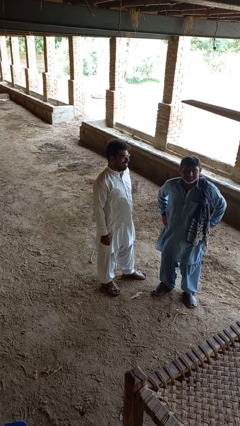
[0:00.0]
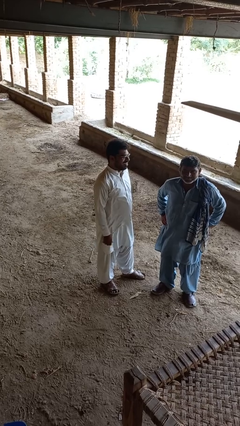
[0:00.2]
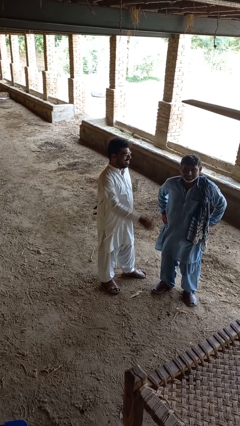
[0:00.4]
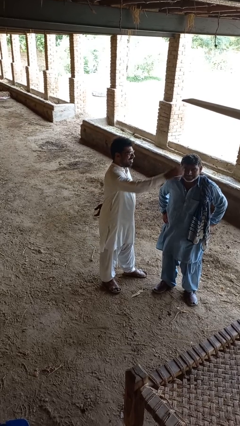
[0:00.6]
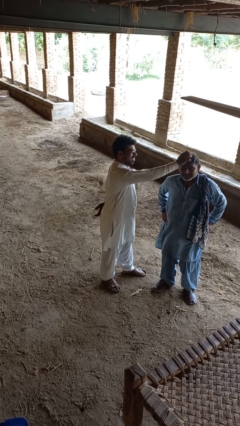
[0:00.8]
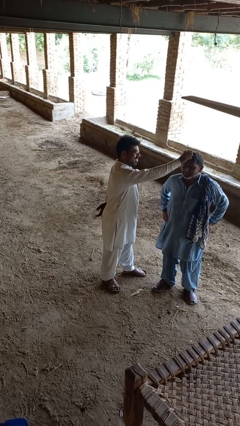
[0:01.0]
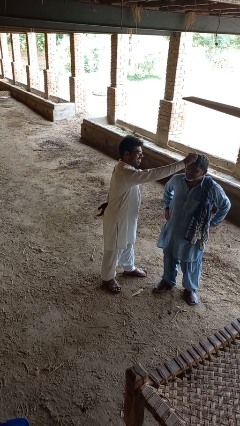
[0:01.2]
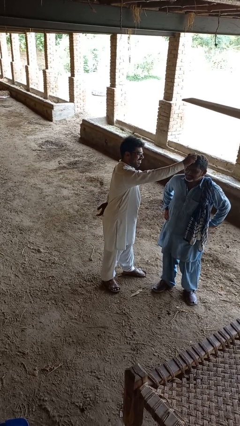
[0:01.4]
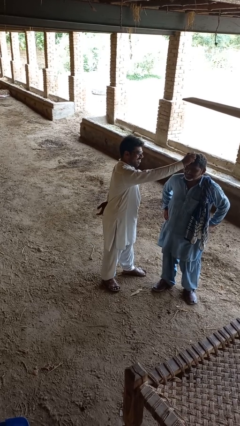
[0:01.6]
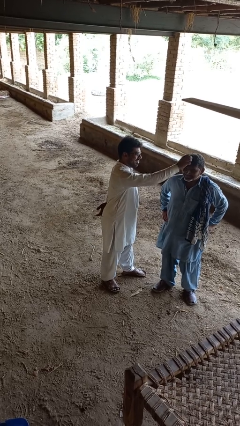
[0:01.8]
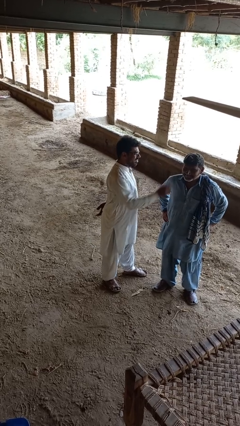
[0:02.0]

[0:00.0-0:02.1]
person grabs person by hair

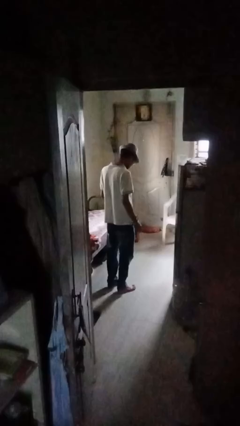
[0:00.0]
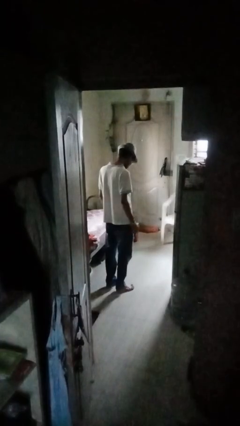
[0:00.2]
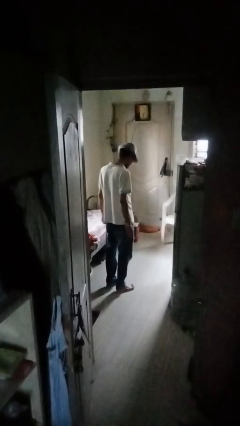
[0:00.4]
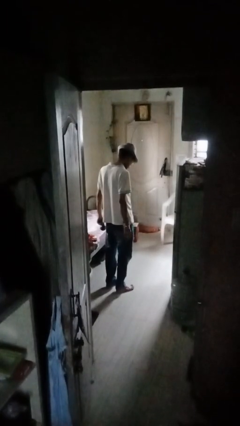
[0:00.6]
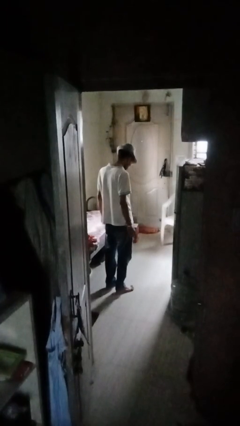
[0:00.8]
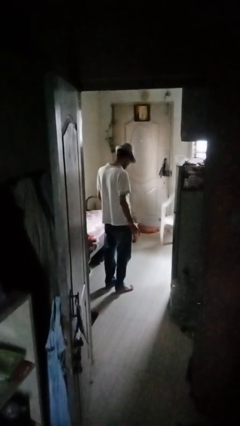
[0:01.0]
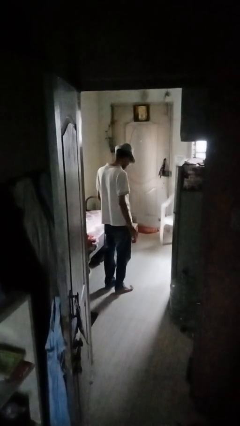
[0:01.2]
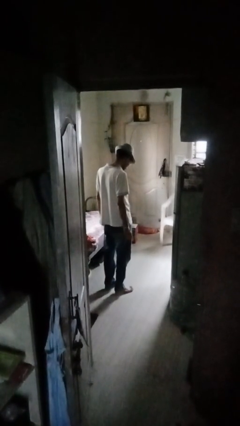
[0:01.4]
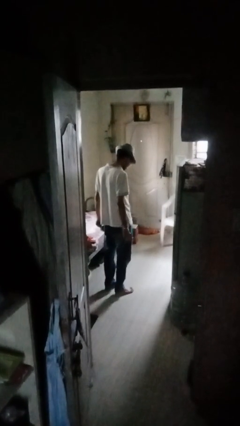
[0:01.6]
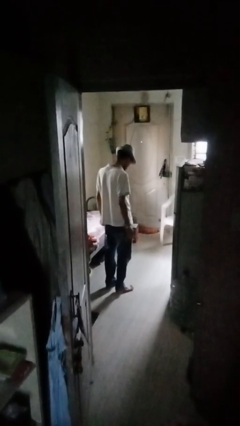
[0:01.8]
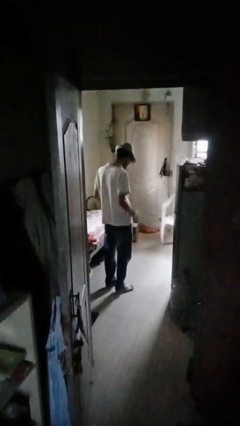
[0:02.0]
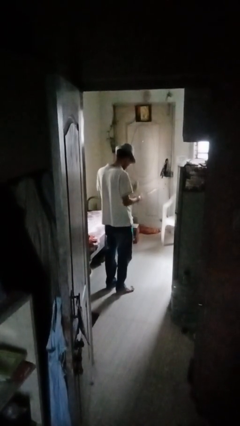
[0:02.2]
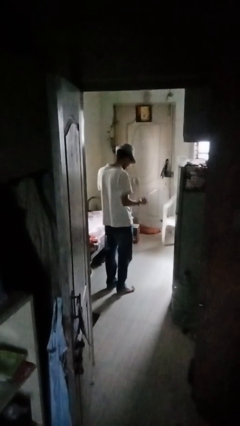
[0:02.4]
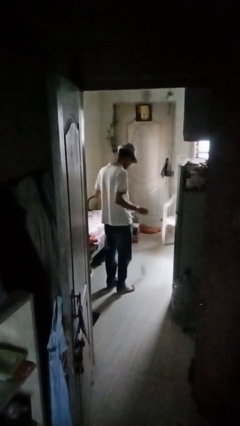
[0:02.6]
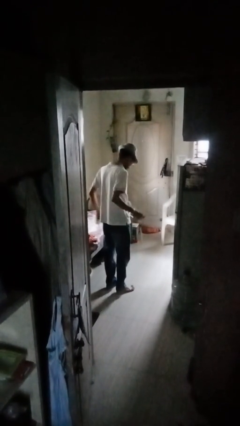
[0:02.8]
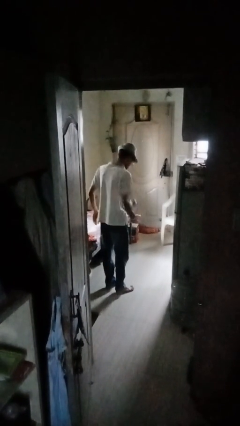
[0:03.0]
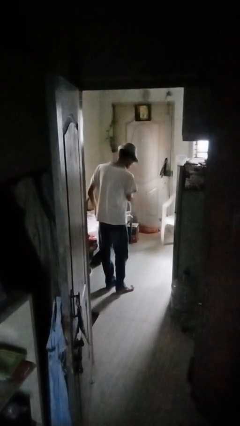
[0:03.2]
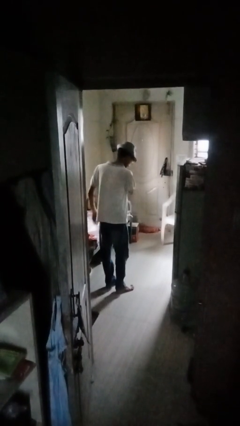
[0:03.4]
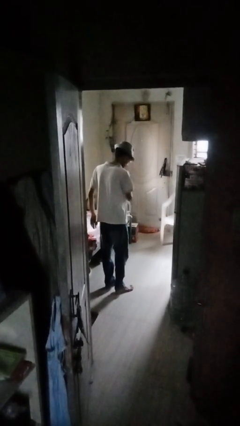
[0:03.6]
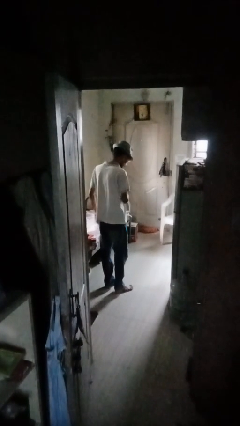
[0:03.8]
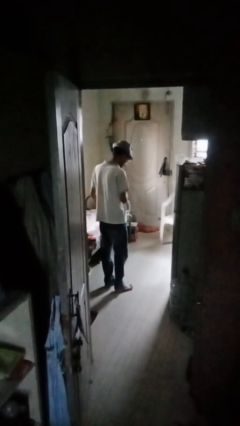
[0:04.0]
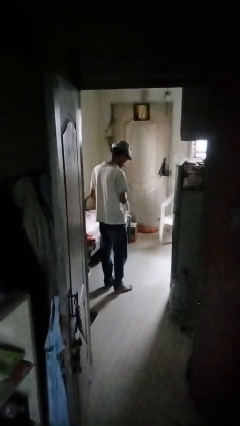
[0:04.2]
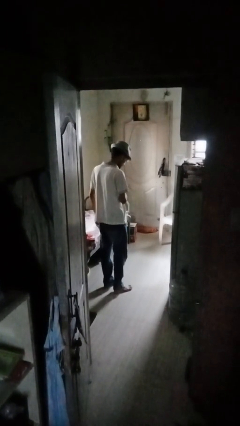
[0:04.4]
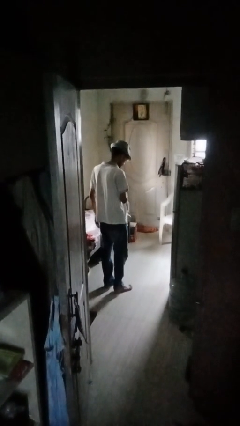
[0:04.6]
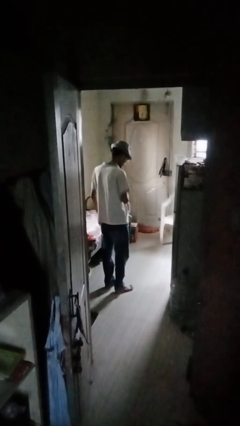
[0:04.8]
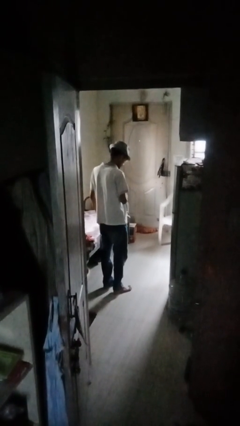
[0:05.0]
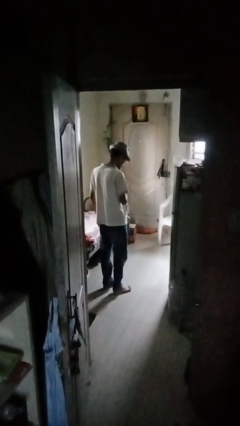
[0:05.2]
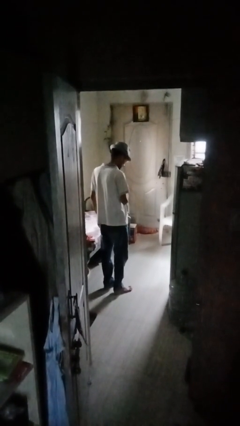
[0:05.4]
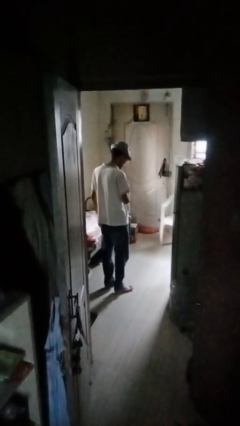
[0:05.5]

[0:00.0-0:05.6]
person bounces ball on floor

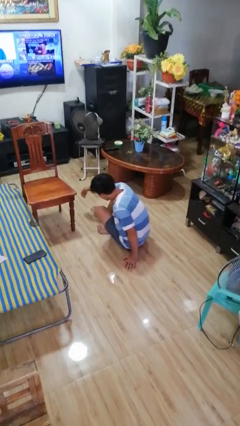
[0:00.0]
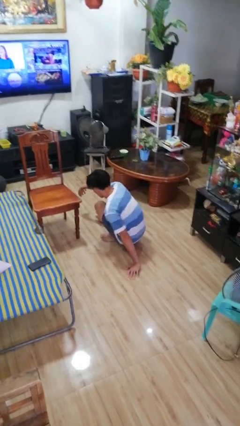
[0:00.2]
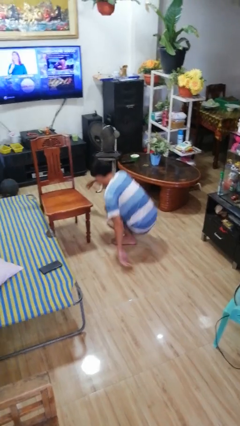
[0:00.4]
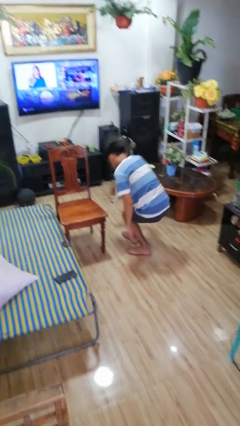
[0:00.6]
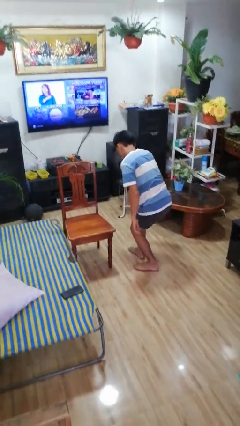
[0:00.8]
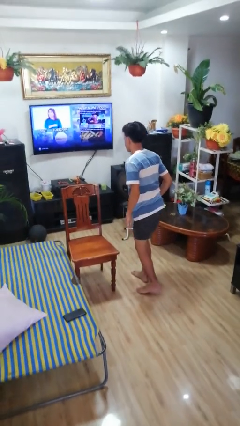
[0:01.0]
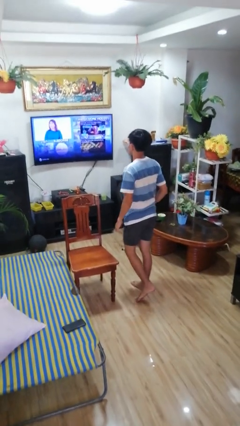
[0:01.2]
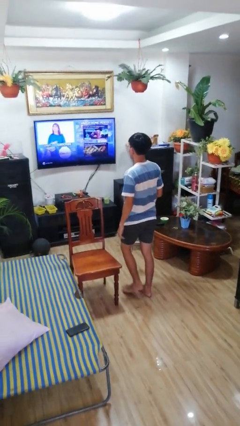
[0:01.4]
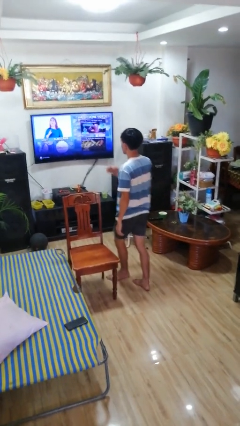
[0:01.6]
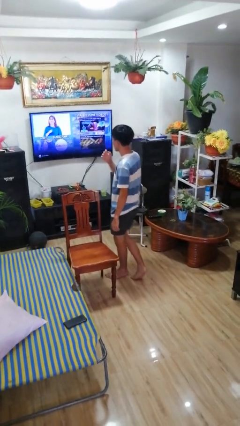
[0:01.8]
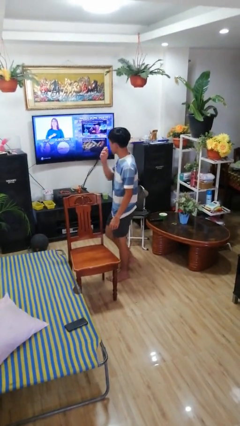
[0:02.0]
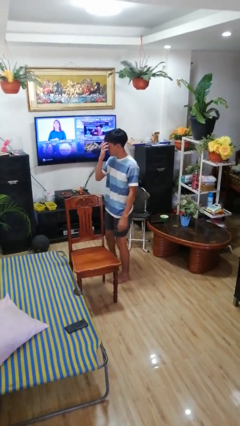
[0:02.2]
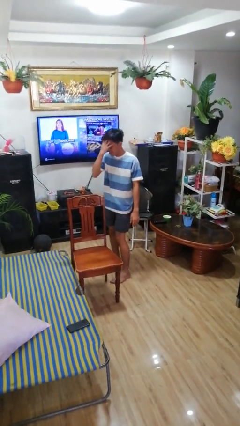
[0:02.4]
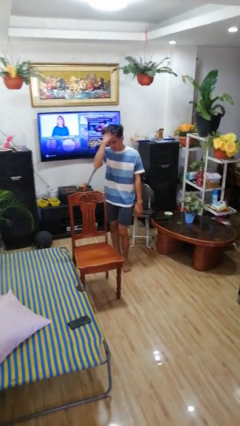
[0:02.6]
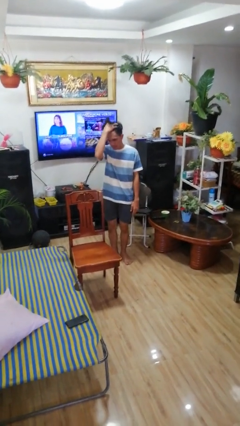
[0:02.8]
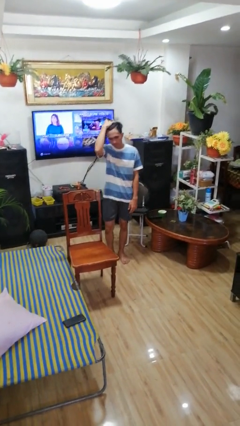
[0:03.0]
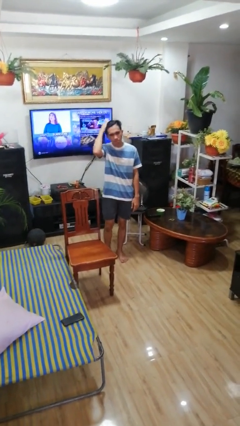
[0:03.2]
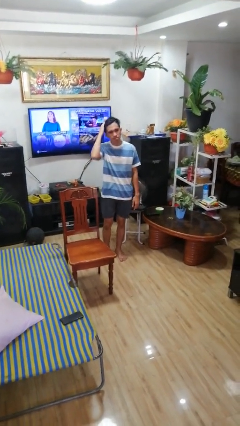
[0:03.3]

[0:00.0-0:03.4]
person stands up from floor

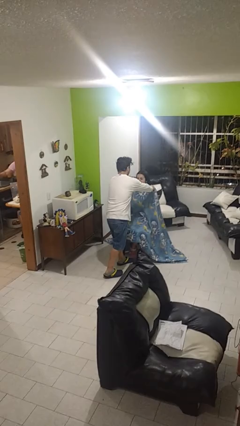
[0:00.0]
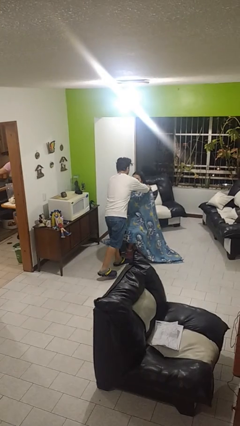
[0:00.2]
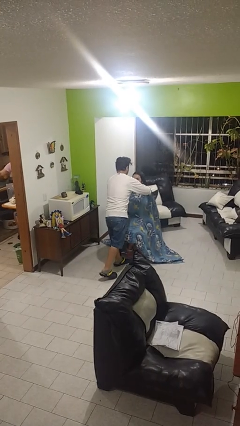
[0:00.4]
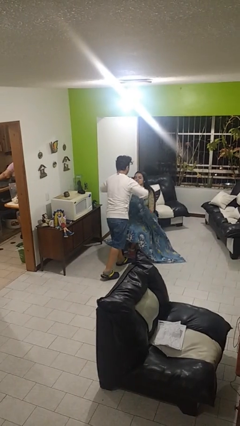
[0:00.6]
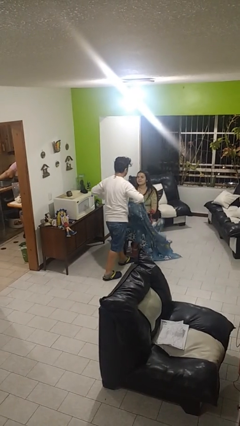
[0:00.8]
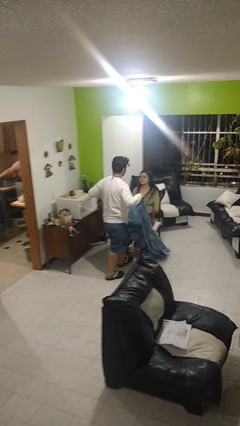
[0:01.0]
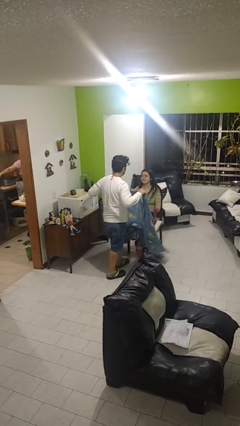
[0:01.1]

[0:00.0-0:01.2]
person uncovers friend with blanket

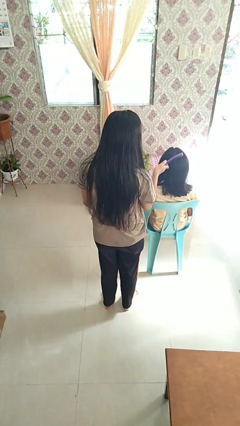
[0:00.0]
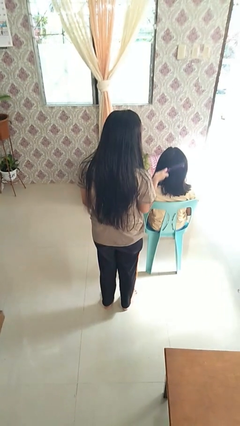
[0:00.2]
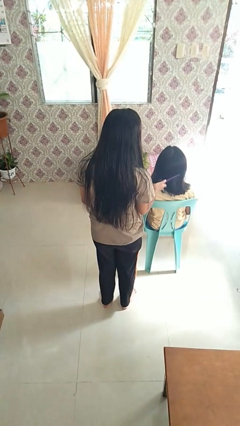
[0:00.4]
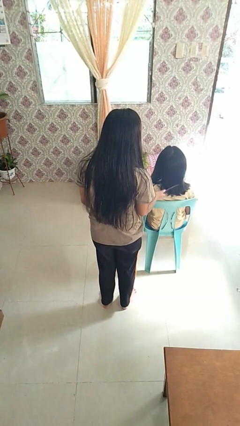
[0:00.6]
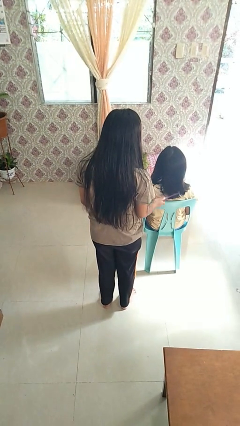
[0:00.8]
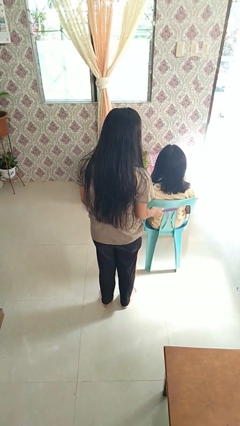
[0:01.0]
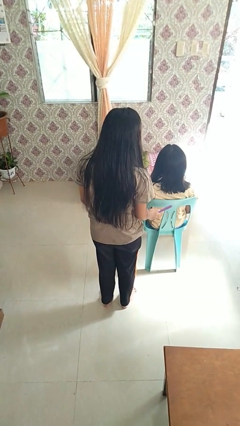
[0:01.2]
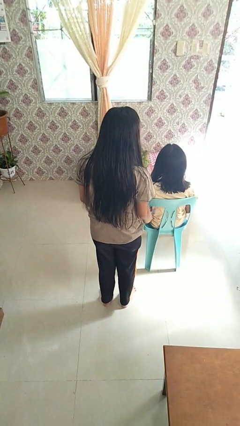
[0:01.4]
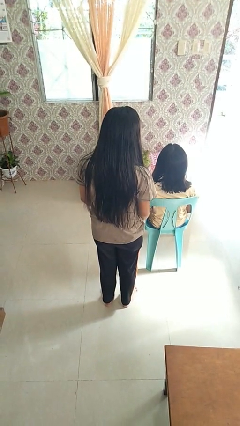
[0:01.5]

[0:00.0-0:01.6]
person brushes hair of person

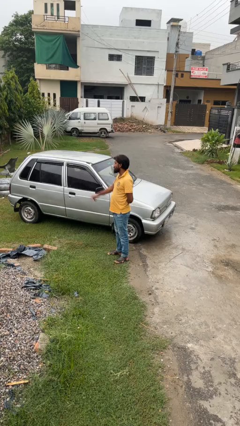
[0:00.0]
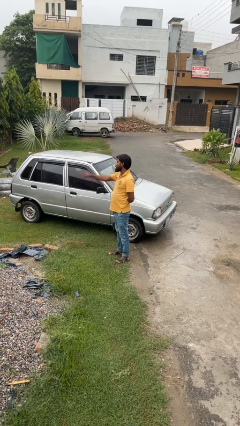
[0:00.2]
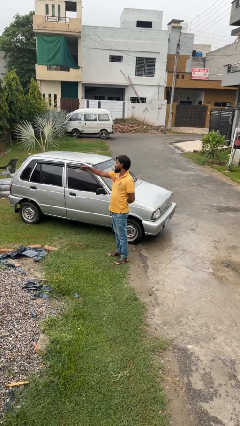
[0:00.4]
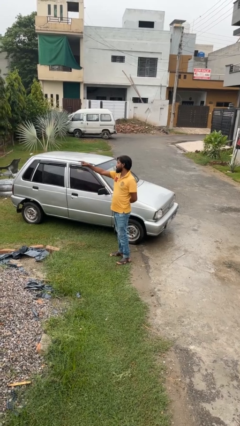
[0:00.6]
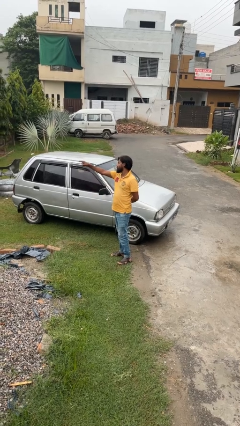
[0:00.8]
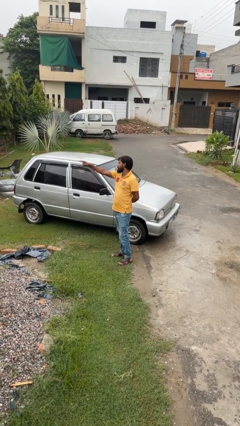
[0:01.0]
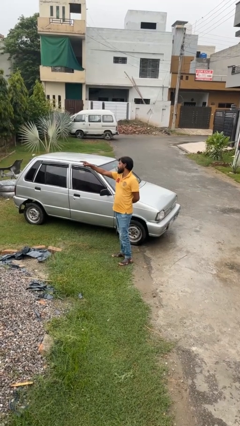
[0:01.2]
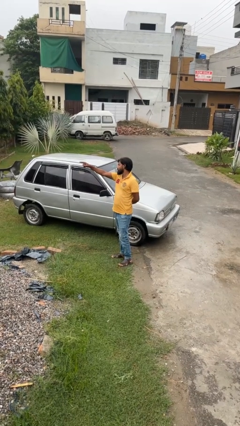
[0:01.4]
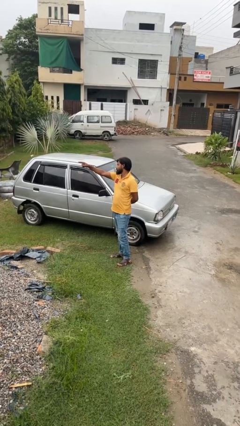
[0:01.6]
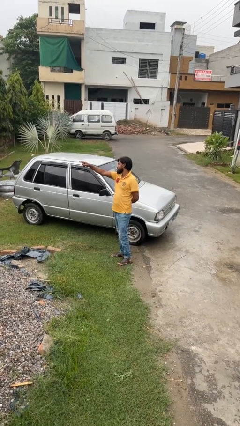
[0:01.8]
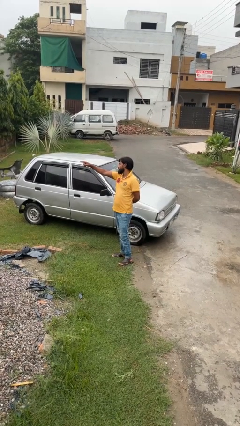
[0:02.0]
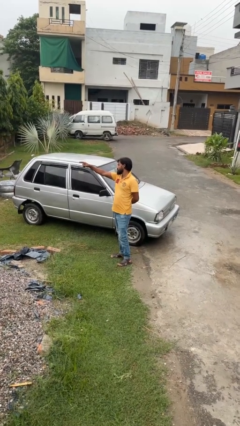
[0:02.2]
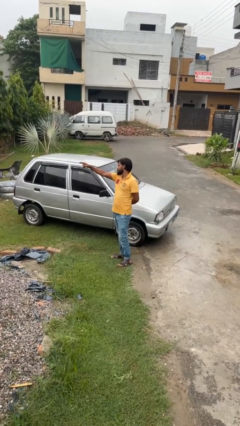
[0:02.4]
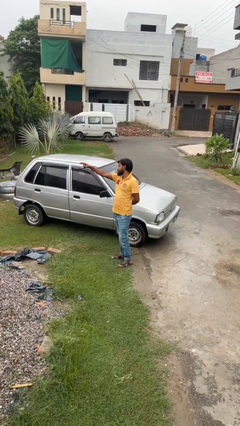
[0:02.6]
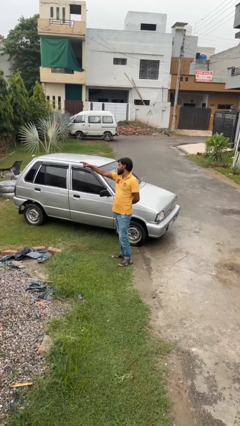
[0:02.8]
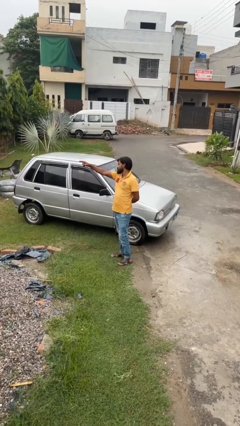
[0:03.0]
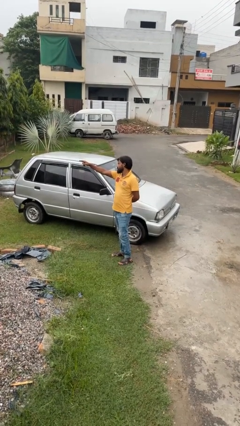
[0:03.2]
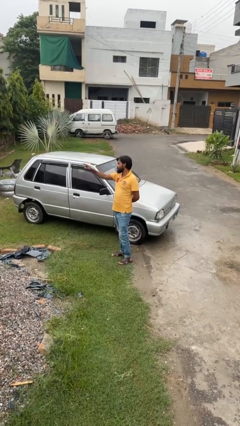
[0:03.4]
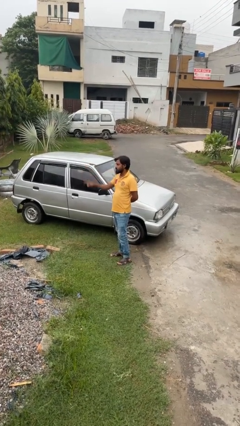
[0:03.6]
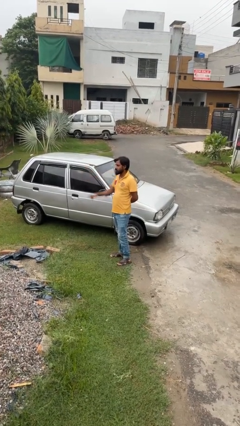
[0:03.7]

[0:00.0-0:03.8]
person points at person
